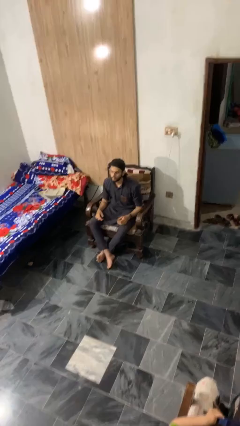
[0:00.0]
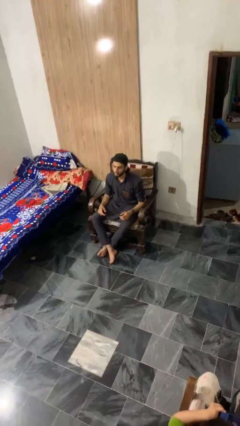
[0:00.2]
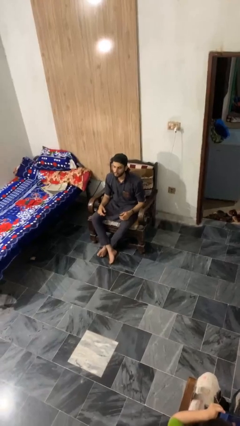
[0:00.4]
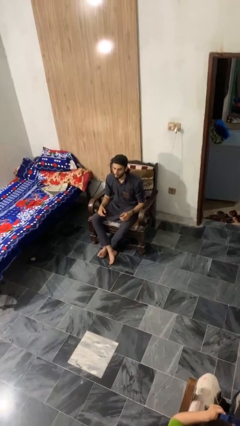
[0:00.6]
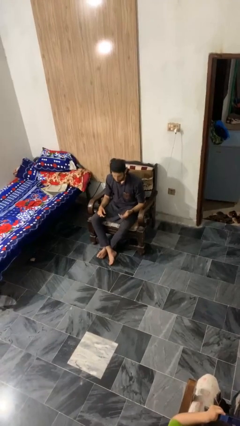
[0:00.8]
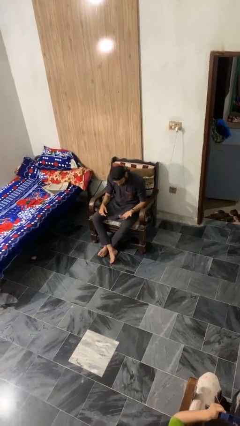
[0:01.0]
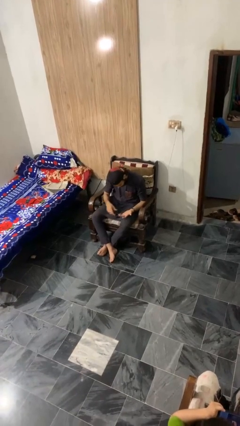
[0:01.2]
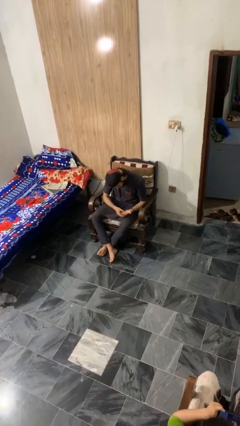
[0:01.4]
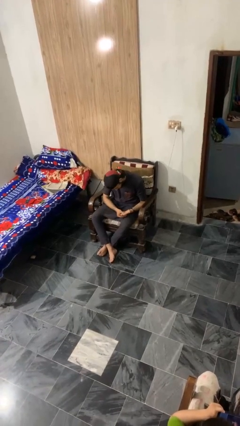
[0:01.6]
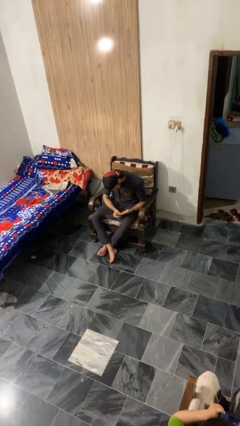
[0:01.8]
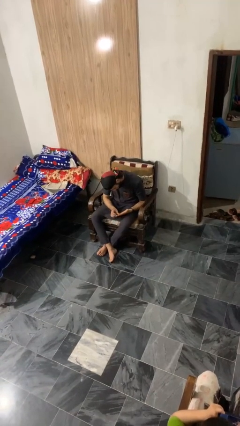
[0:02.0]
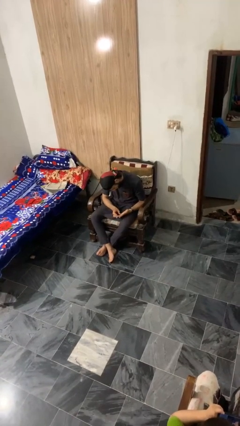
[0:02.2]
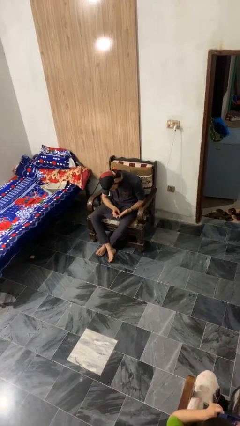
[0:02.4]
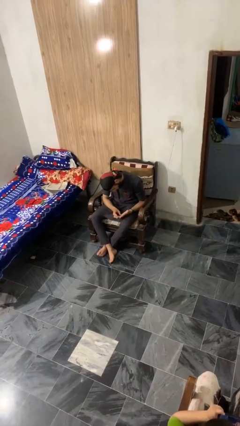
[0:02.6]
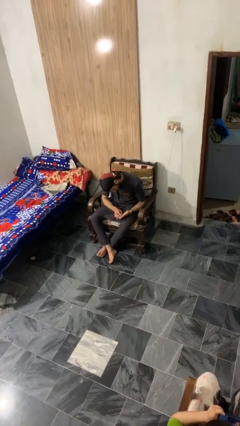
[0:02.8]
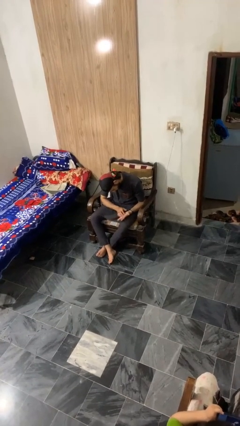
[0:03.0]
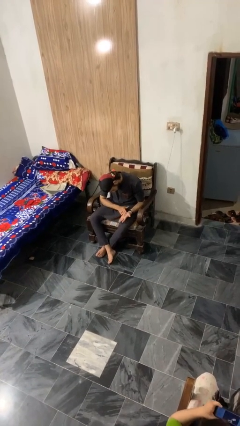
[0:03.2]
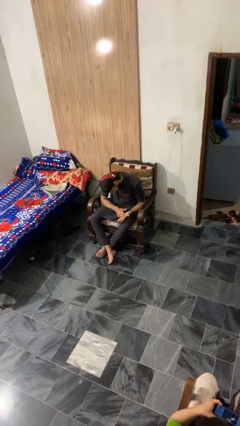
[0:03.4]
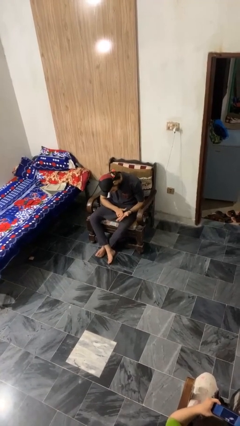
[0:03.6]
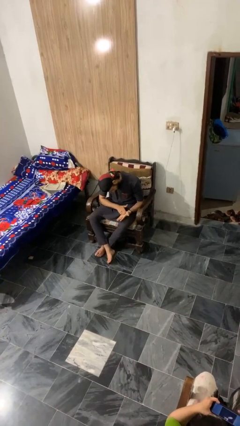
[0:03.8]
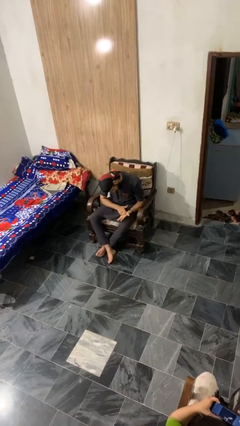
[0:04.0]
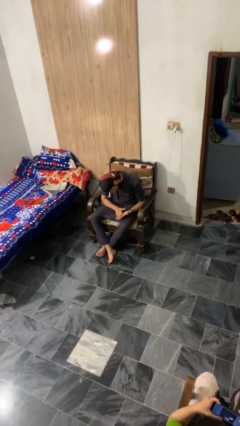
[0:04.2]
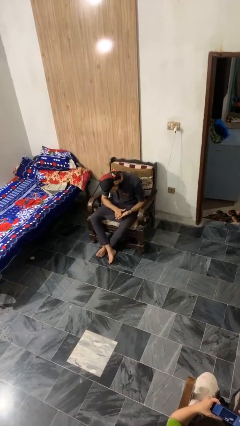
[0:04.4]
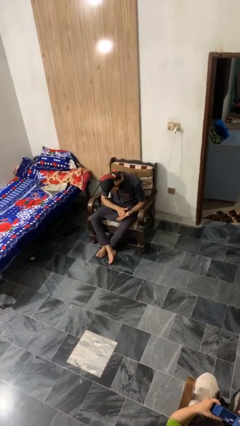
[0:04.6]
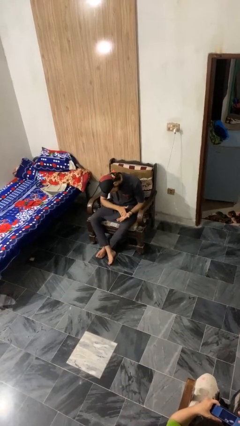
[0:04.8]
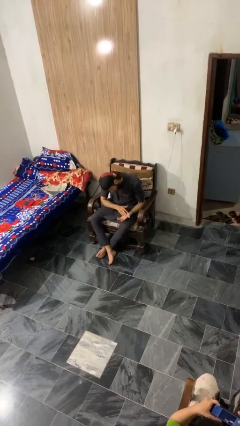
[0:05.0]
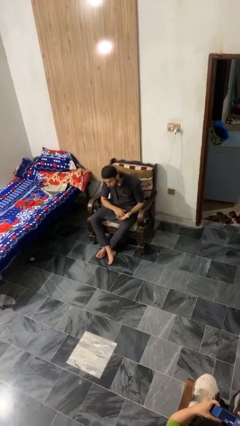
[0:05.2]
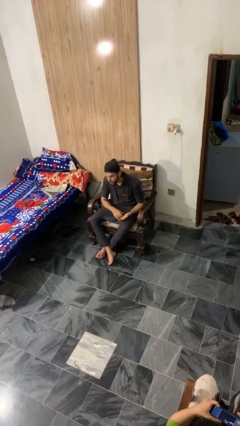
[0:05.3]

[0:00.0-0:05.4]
person looks at hands in lap

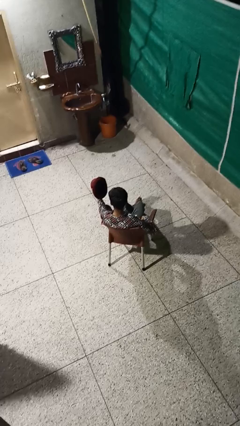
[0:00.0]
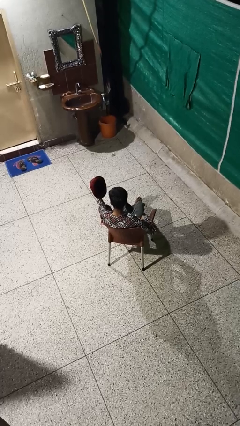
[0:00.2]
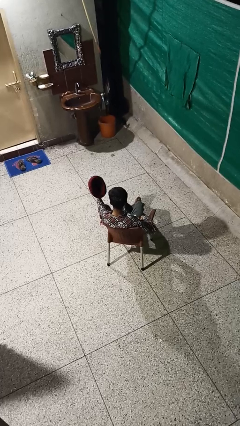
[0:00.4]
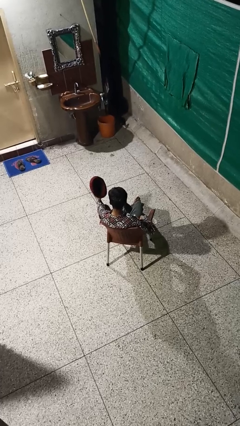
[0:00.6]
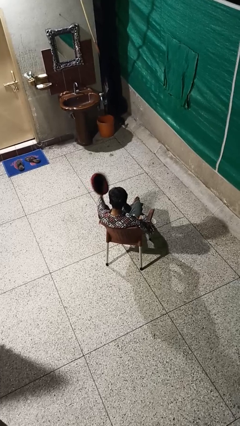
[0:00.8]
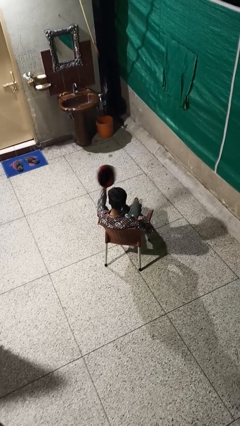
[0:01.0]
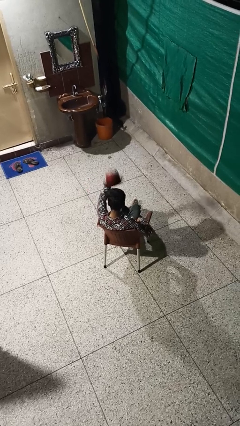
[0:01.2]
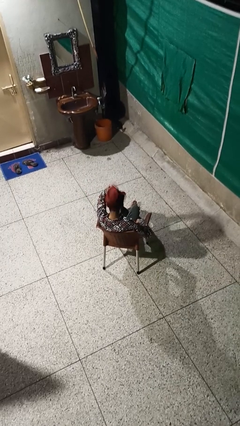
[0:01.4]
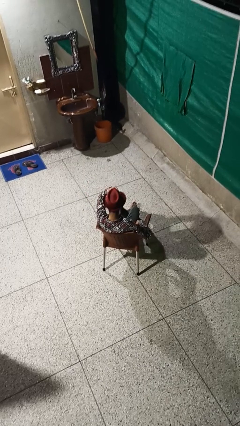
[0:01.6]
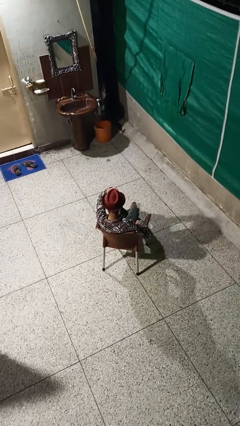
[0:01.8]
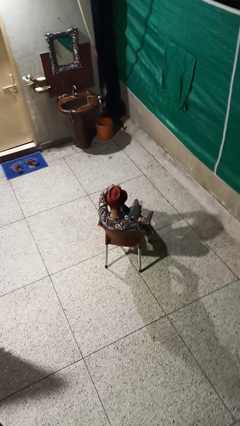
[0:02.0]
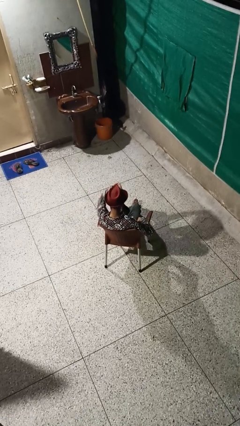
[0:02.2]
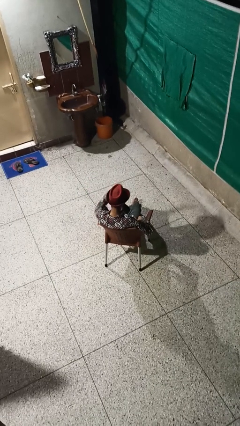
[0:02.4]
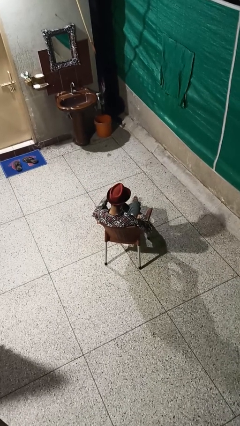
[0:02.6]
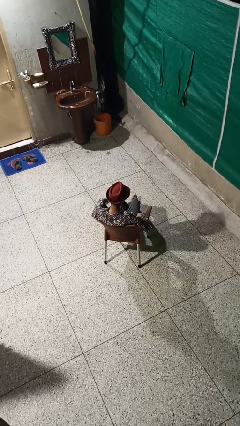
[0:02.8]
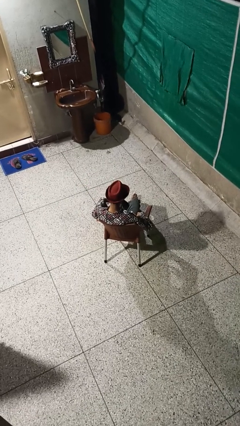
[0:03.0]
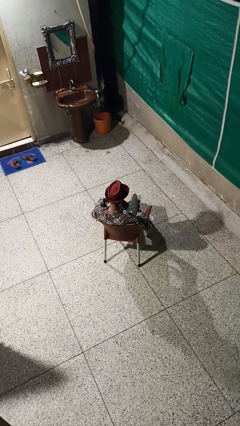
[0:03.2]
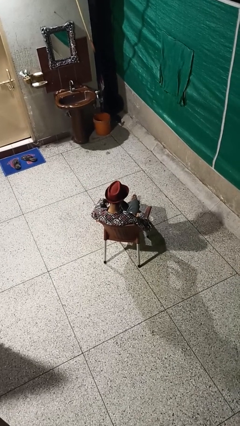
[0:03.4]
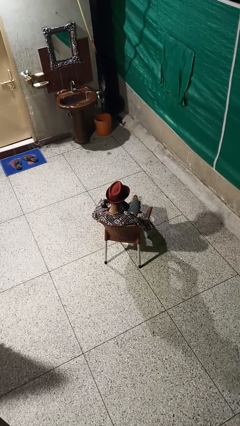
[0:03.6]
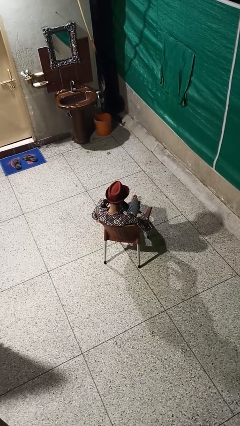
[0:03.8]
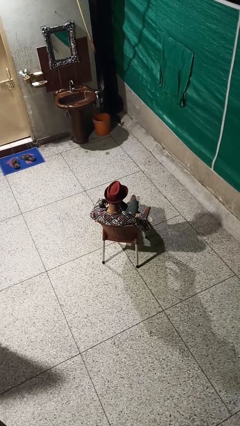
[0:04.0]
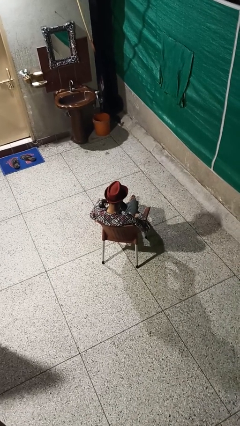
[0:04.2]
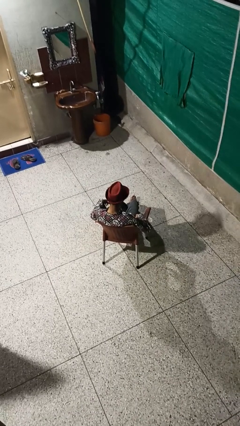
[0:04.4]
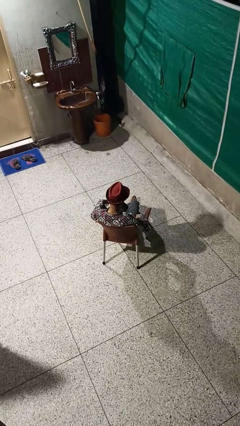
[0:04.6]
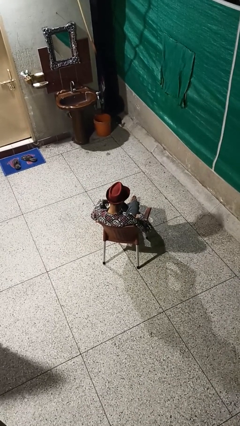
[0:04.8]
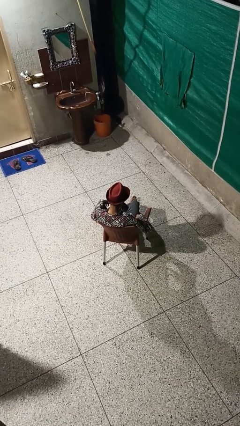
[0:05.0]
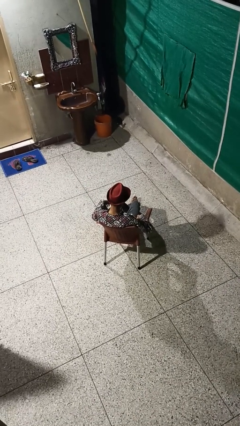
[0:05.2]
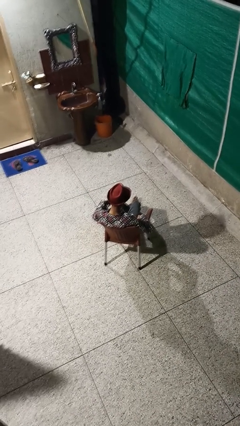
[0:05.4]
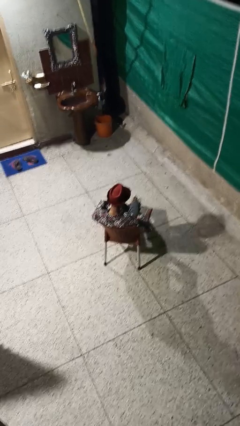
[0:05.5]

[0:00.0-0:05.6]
person puts on hat

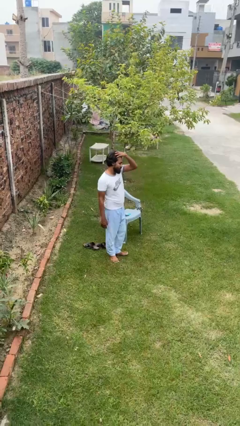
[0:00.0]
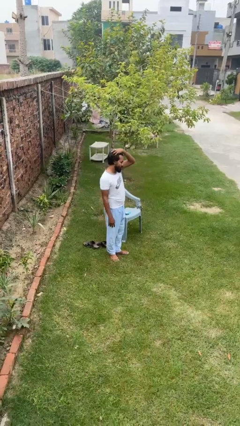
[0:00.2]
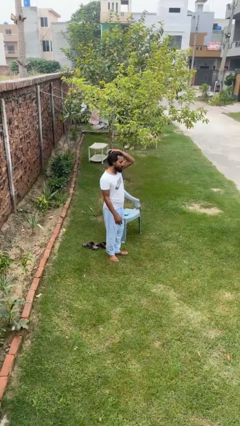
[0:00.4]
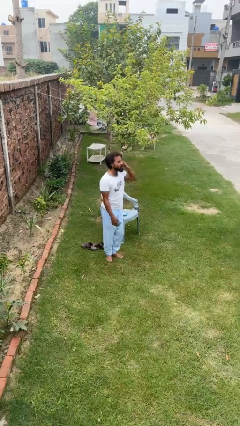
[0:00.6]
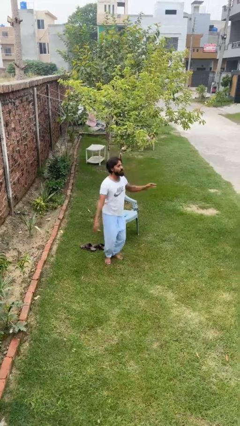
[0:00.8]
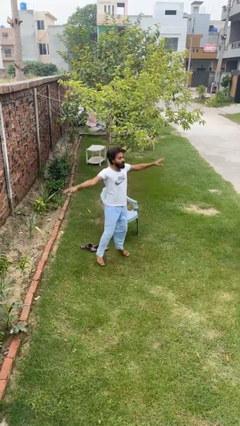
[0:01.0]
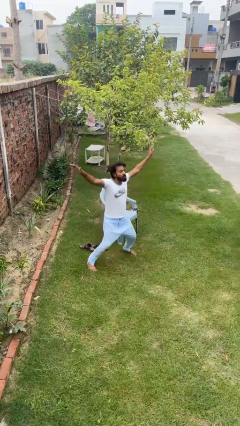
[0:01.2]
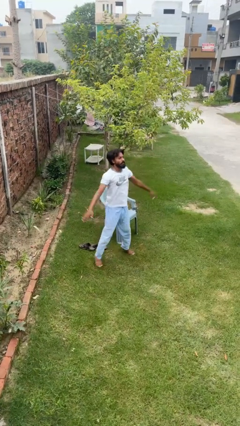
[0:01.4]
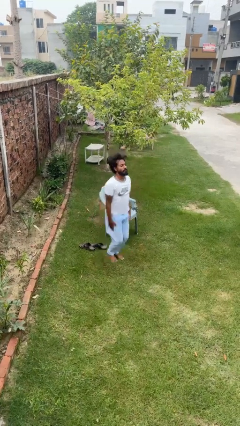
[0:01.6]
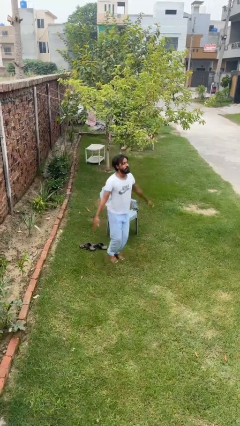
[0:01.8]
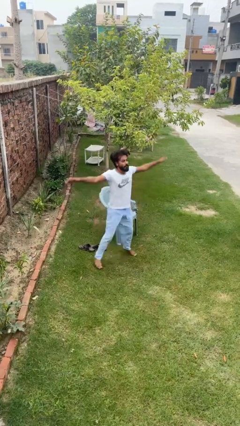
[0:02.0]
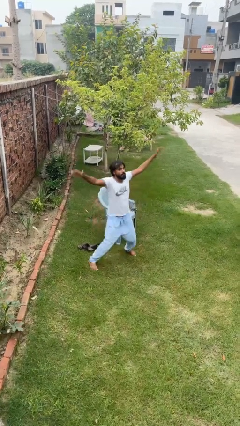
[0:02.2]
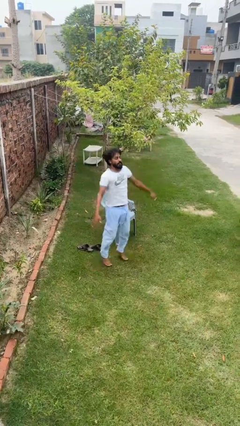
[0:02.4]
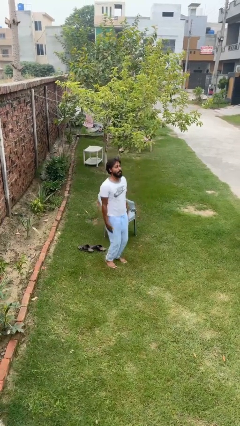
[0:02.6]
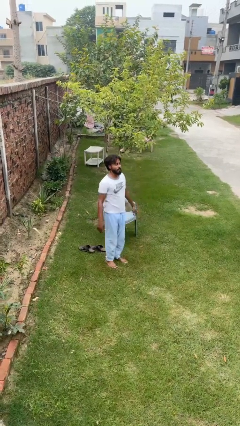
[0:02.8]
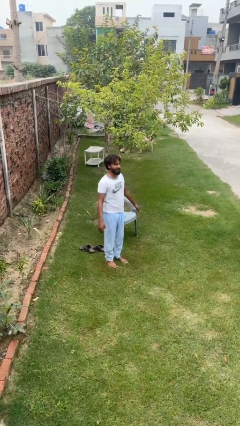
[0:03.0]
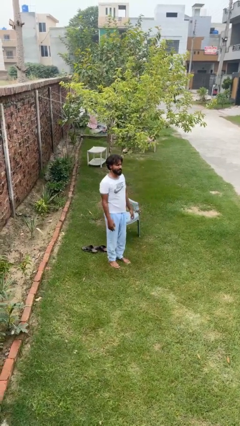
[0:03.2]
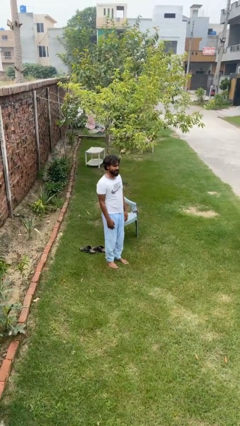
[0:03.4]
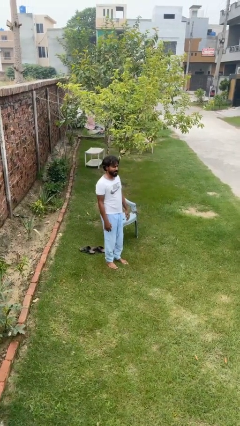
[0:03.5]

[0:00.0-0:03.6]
person exercises with jumping jacks

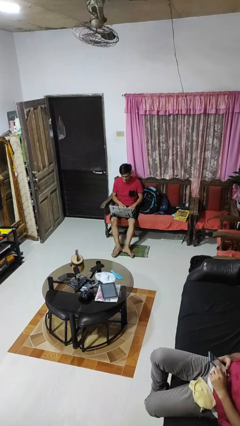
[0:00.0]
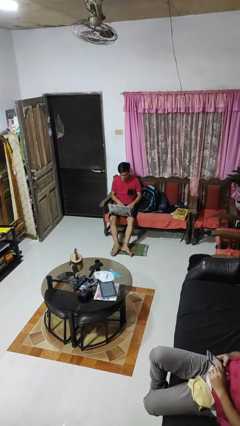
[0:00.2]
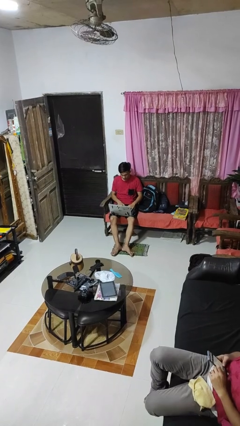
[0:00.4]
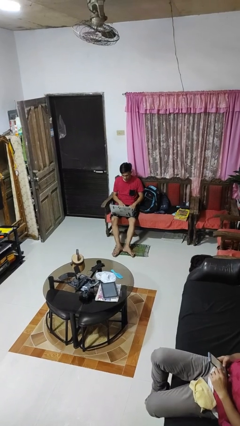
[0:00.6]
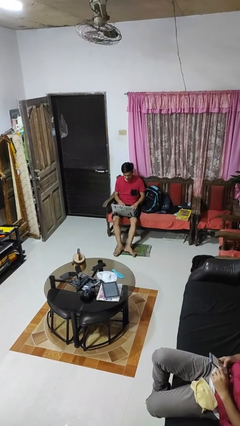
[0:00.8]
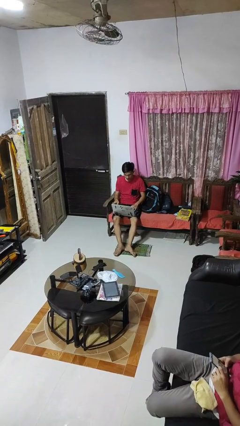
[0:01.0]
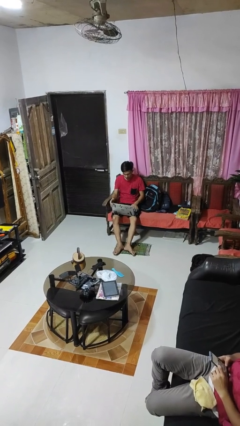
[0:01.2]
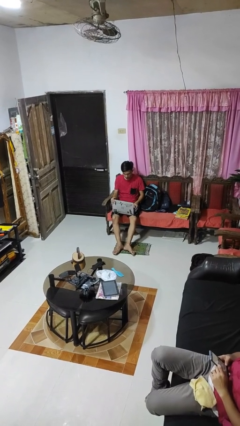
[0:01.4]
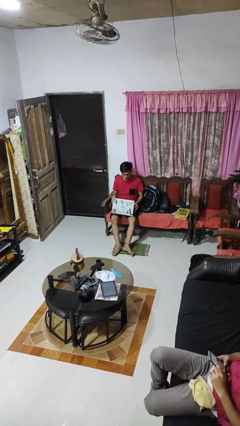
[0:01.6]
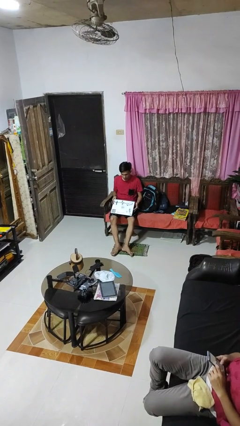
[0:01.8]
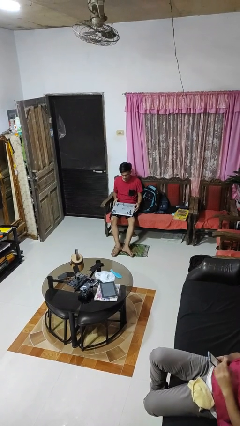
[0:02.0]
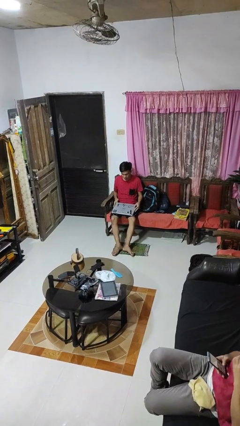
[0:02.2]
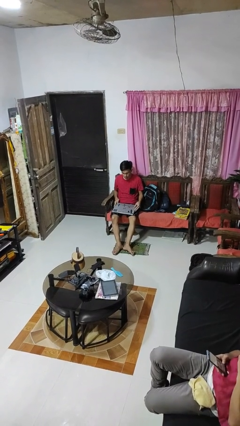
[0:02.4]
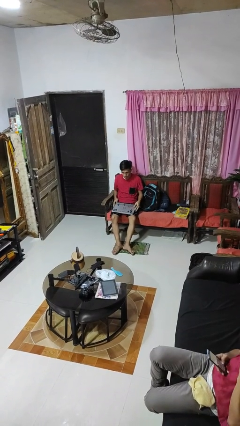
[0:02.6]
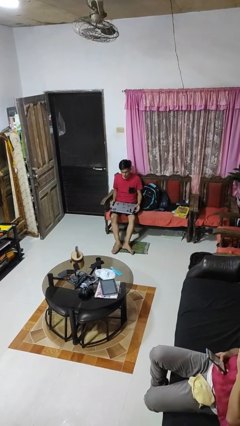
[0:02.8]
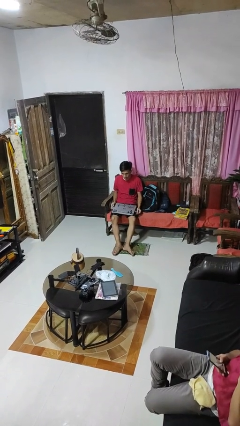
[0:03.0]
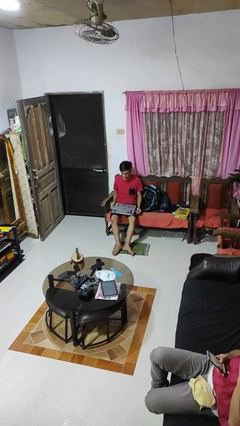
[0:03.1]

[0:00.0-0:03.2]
person closes laptop
